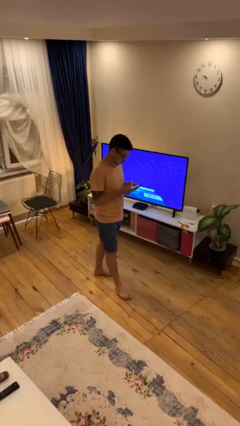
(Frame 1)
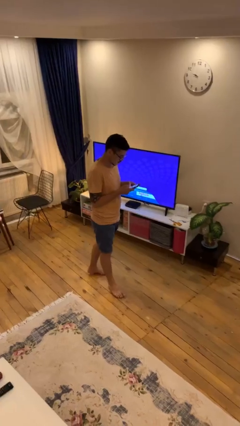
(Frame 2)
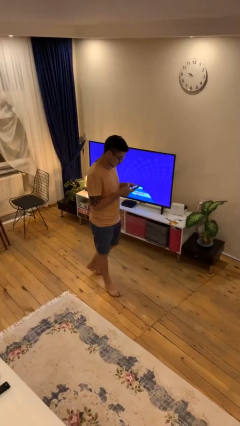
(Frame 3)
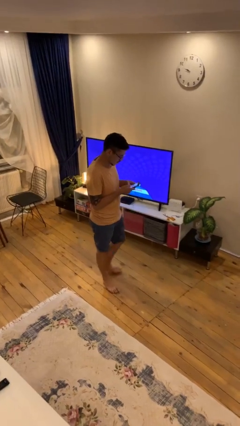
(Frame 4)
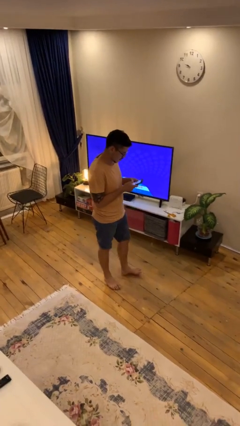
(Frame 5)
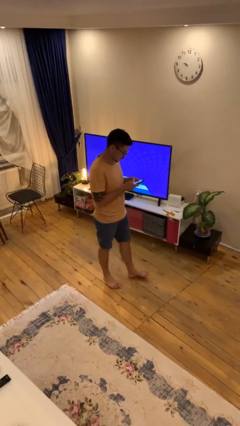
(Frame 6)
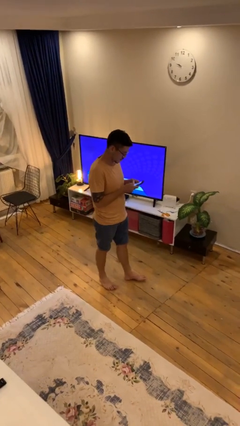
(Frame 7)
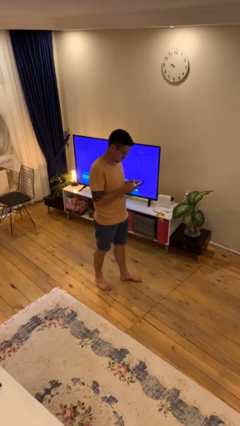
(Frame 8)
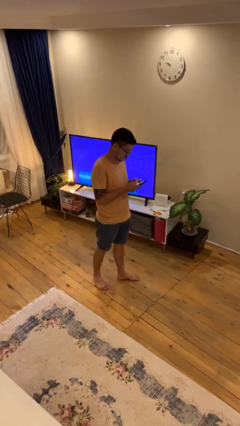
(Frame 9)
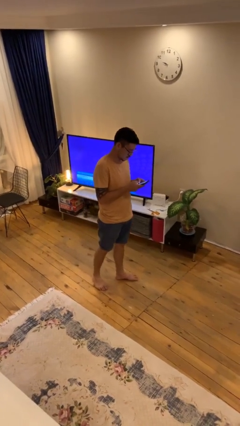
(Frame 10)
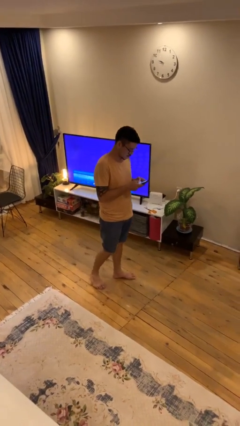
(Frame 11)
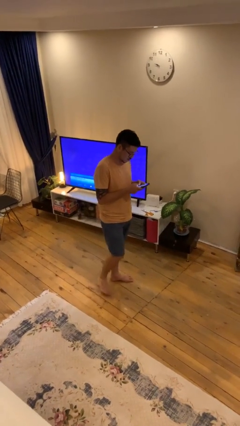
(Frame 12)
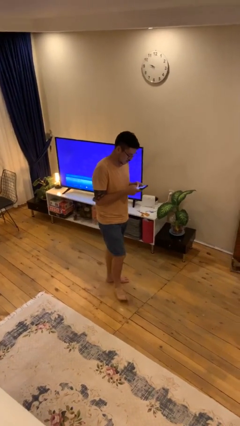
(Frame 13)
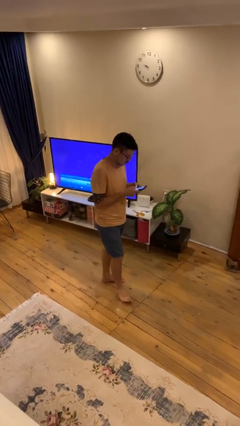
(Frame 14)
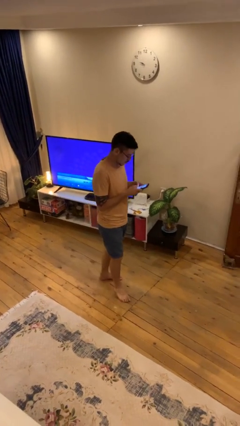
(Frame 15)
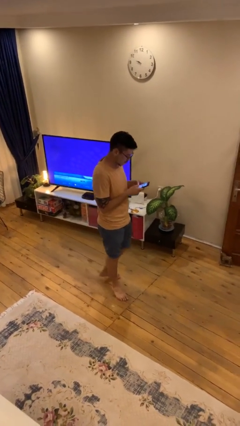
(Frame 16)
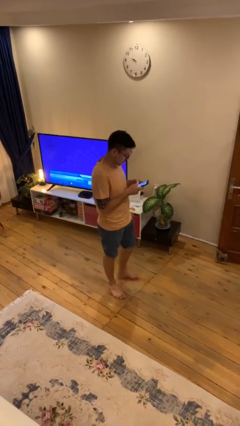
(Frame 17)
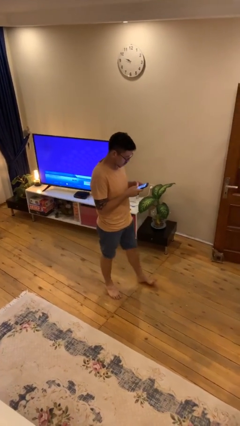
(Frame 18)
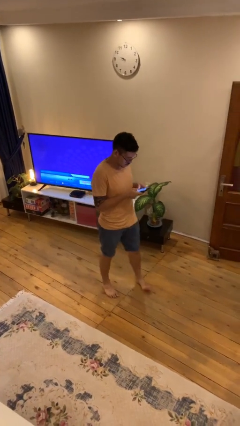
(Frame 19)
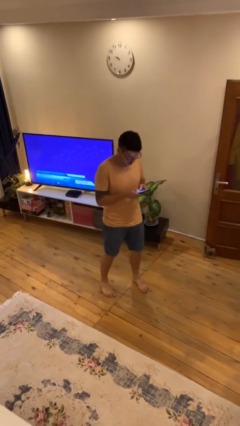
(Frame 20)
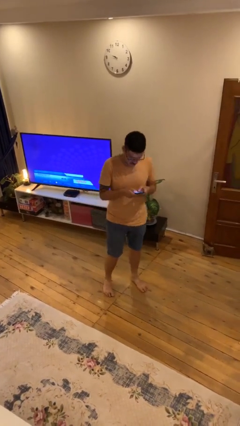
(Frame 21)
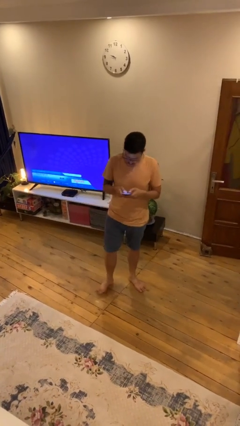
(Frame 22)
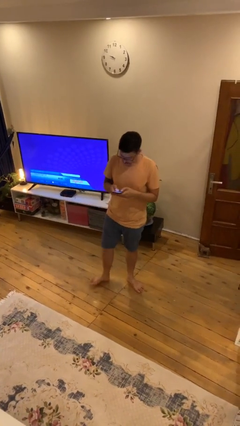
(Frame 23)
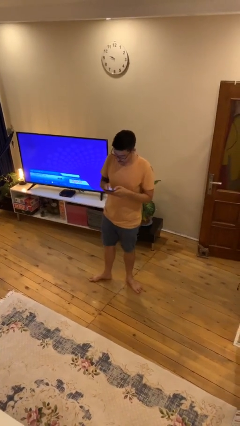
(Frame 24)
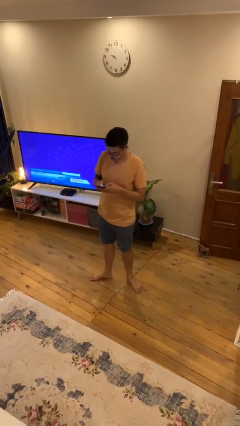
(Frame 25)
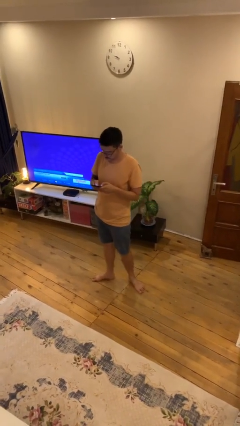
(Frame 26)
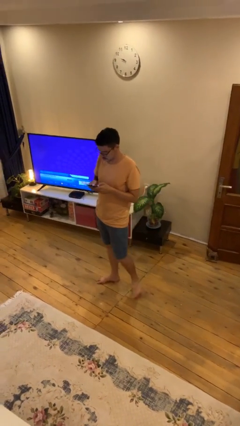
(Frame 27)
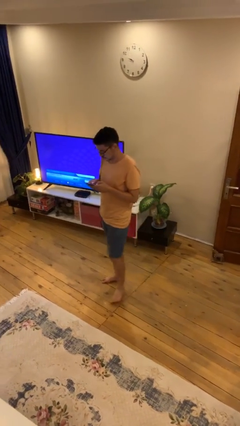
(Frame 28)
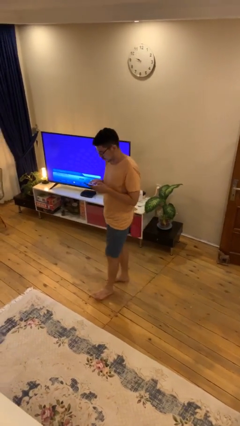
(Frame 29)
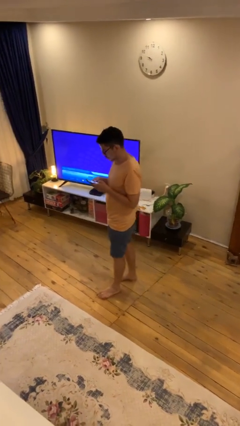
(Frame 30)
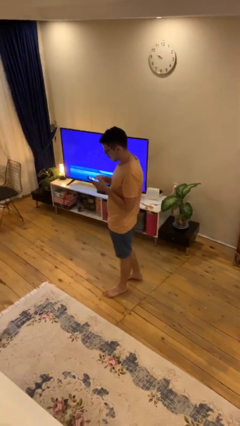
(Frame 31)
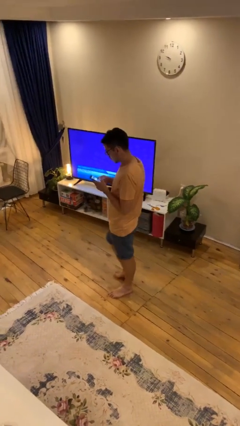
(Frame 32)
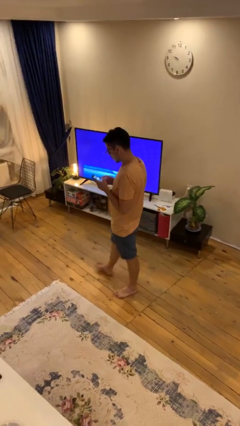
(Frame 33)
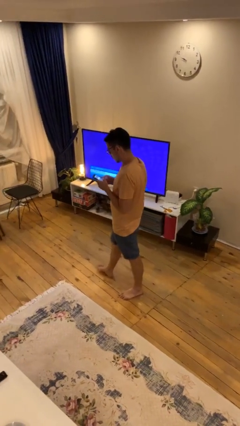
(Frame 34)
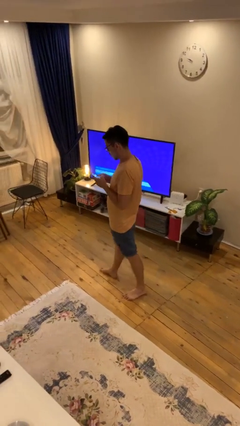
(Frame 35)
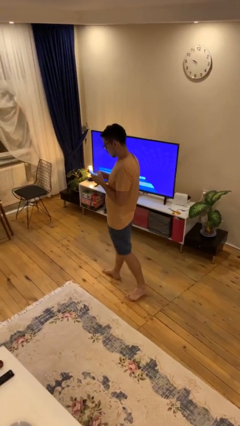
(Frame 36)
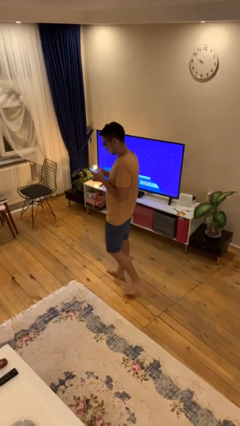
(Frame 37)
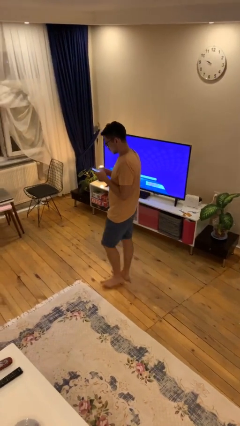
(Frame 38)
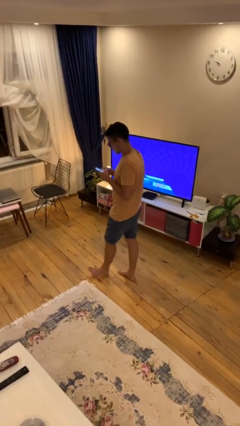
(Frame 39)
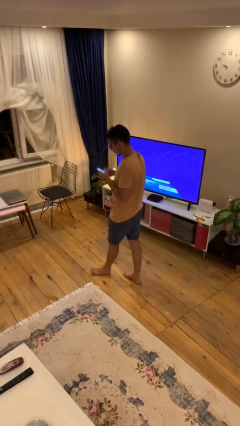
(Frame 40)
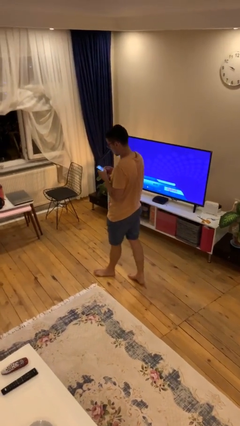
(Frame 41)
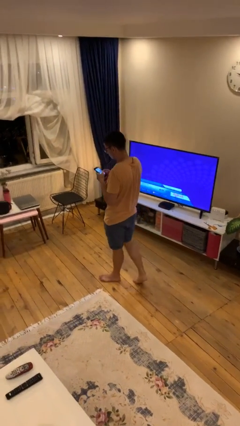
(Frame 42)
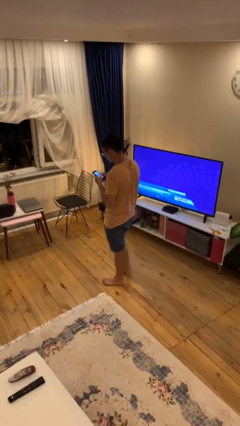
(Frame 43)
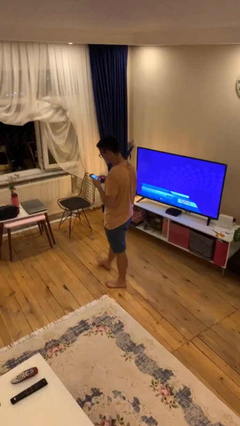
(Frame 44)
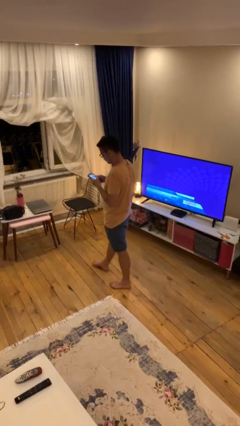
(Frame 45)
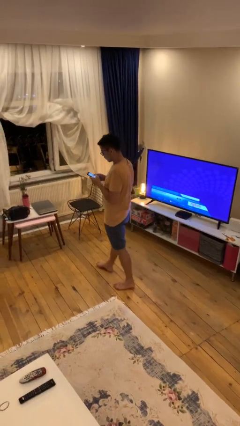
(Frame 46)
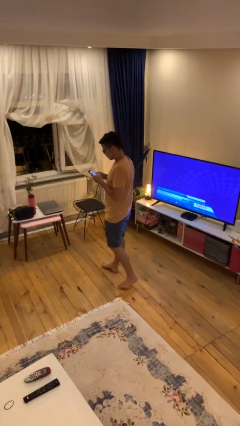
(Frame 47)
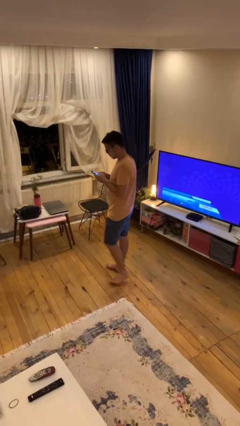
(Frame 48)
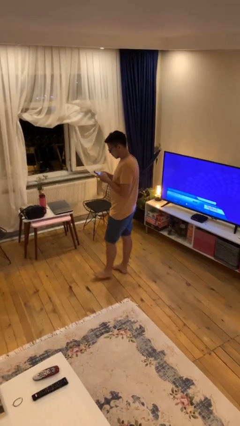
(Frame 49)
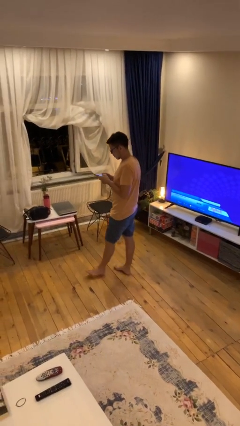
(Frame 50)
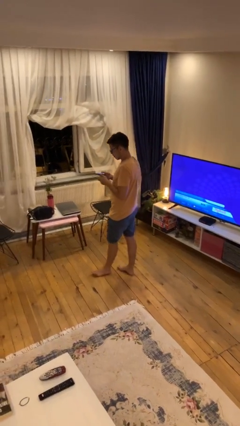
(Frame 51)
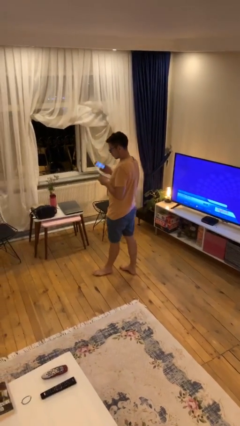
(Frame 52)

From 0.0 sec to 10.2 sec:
person texts on phone

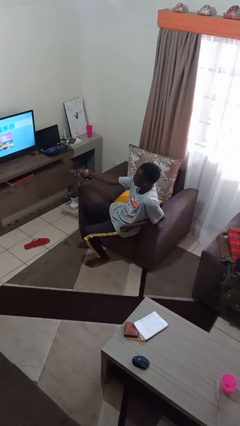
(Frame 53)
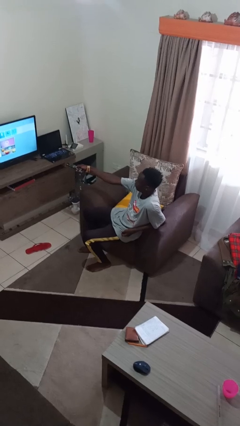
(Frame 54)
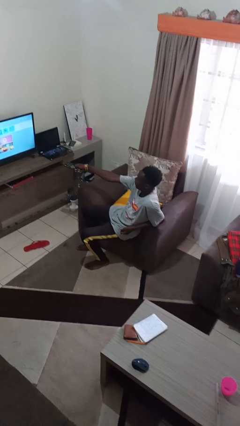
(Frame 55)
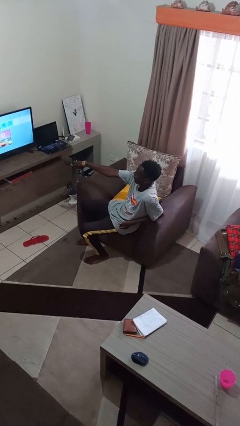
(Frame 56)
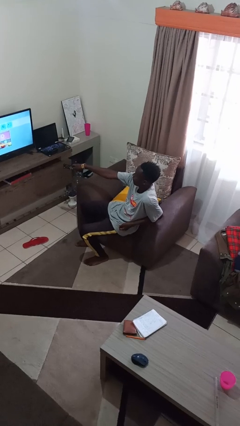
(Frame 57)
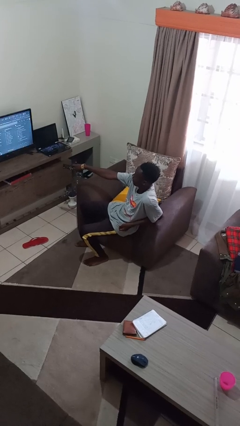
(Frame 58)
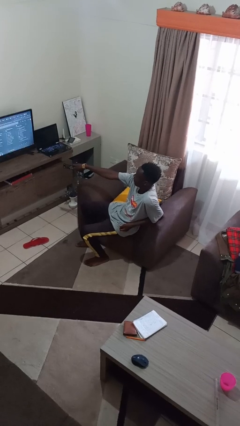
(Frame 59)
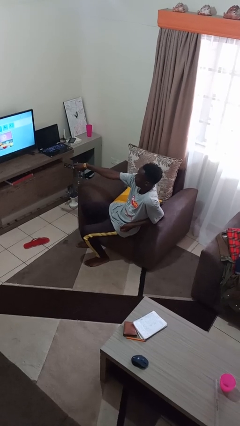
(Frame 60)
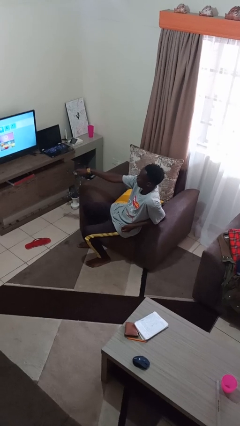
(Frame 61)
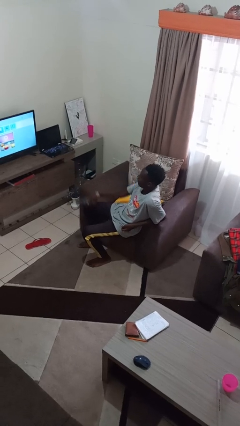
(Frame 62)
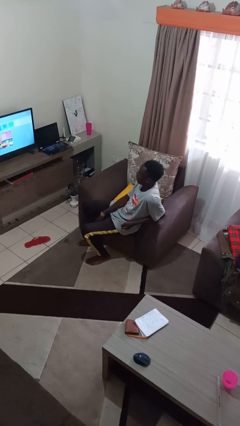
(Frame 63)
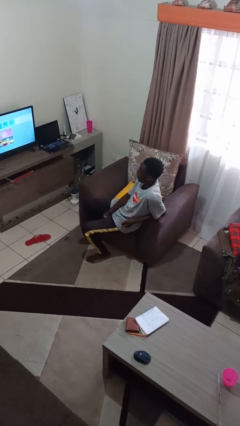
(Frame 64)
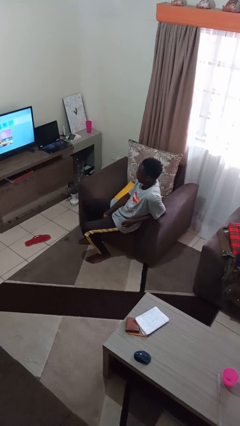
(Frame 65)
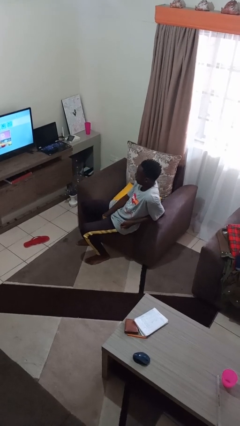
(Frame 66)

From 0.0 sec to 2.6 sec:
person uses television remote

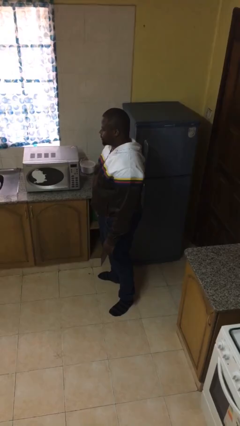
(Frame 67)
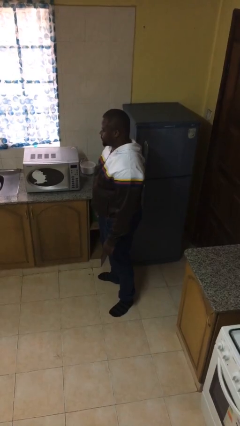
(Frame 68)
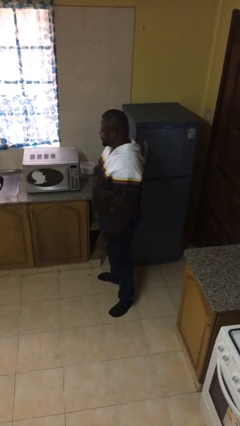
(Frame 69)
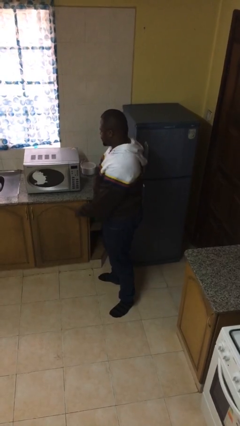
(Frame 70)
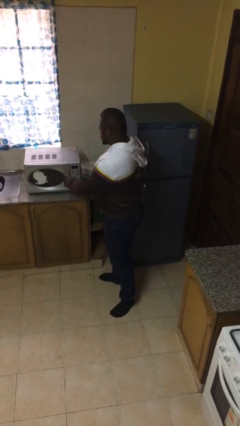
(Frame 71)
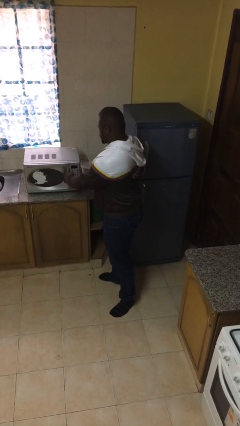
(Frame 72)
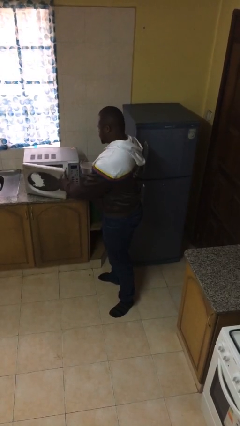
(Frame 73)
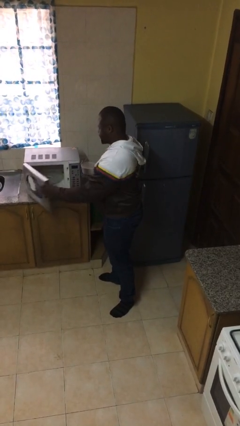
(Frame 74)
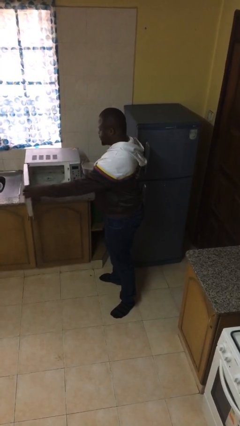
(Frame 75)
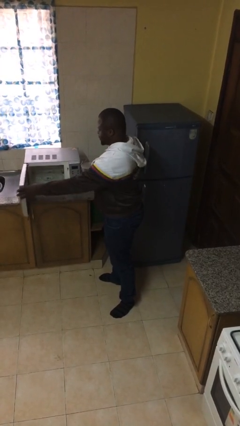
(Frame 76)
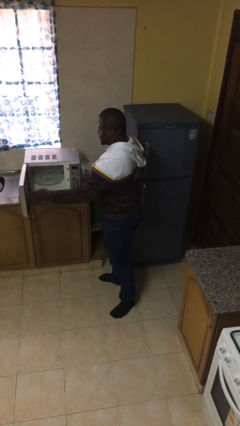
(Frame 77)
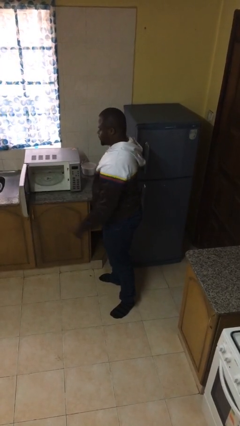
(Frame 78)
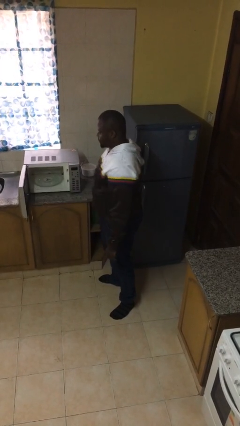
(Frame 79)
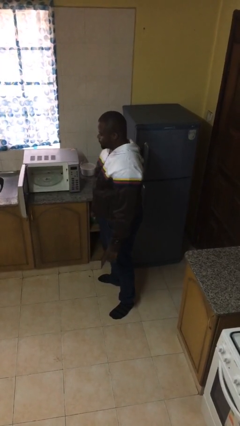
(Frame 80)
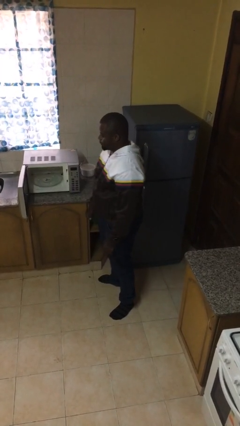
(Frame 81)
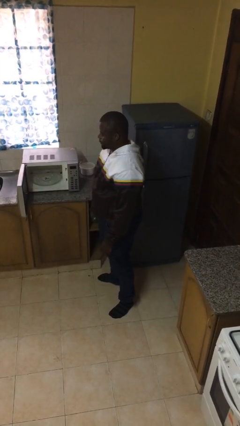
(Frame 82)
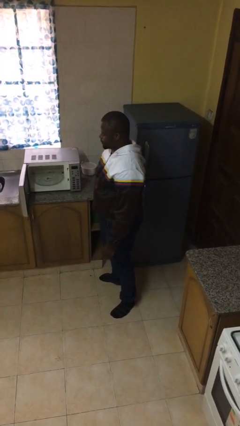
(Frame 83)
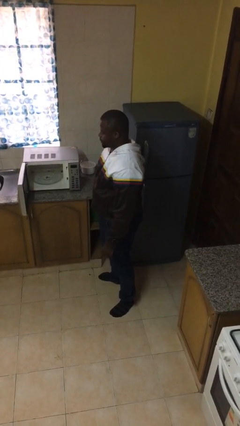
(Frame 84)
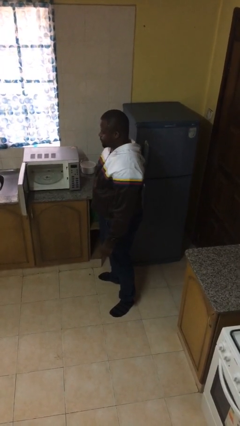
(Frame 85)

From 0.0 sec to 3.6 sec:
person opens microwave

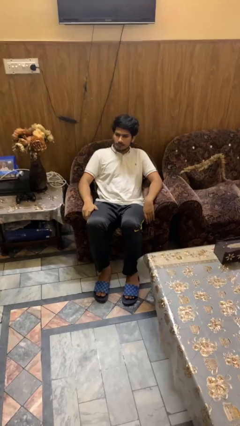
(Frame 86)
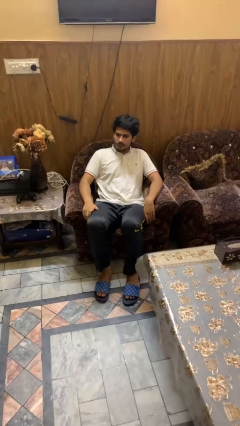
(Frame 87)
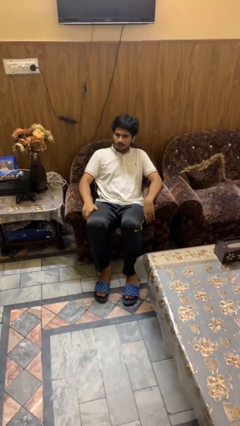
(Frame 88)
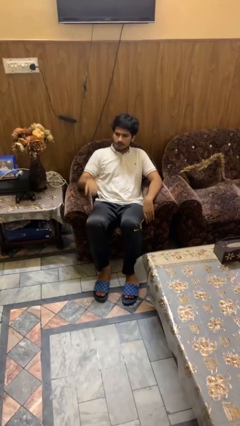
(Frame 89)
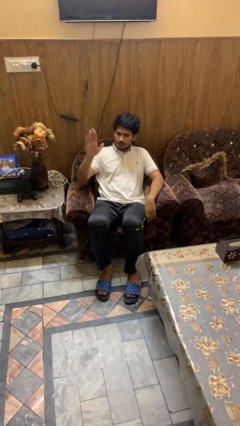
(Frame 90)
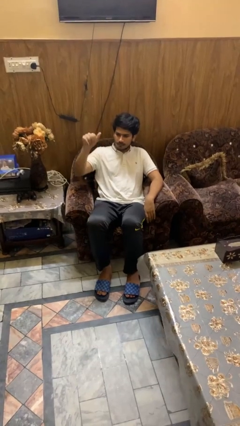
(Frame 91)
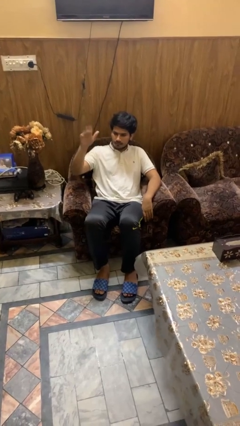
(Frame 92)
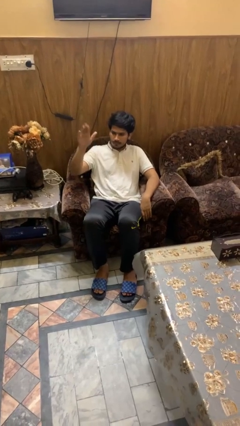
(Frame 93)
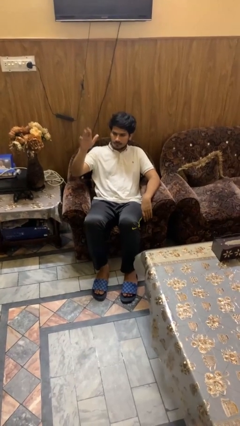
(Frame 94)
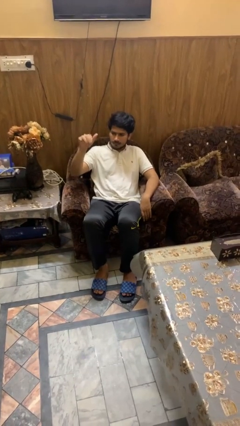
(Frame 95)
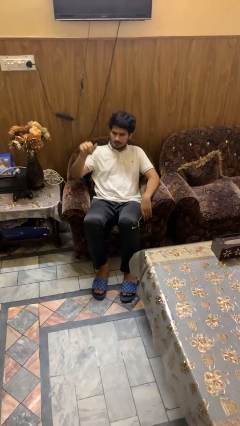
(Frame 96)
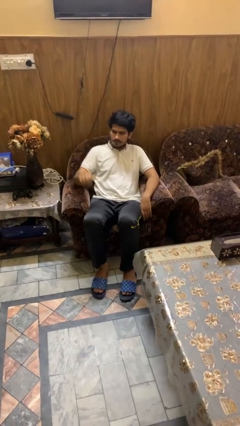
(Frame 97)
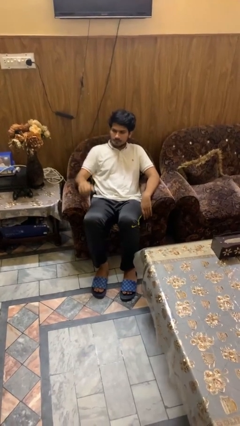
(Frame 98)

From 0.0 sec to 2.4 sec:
person gestures come here
